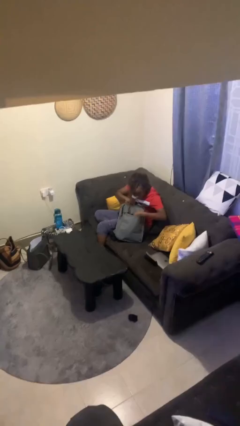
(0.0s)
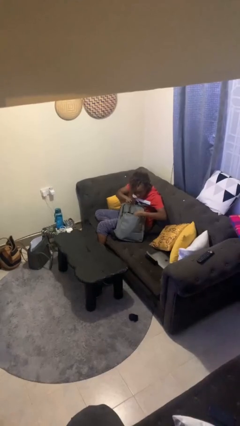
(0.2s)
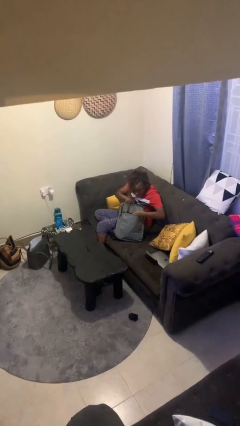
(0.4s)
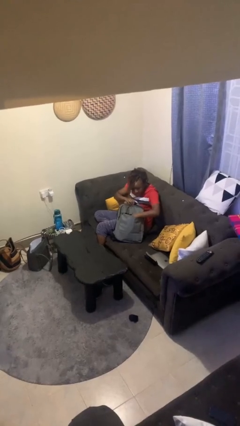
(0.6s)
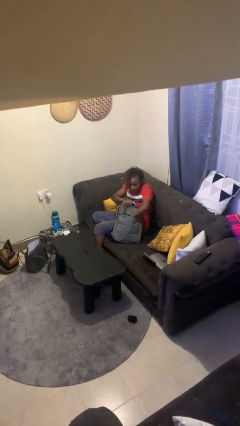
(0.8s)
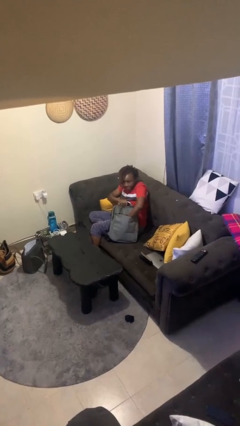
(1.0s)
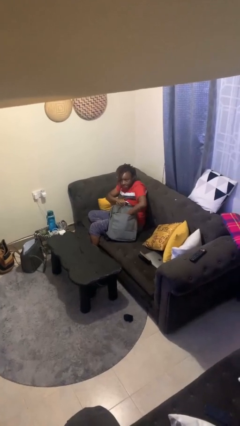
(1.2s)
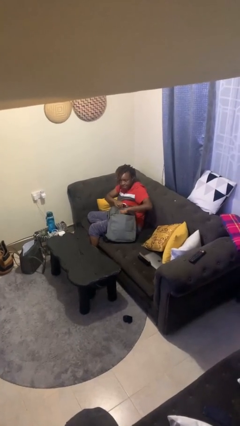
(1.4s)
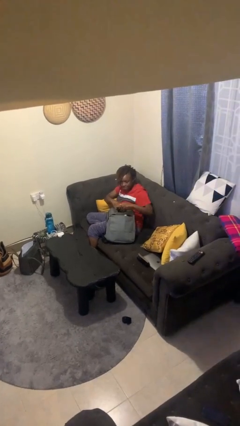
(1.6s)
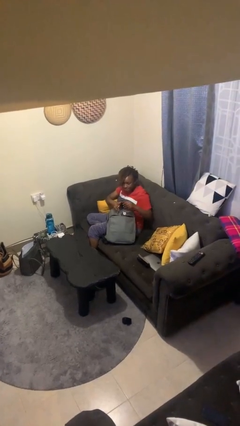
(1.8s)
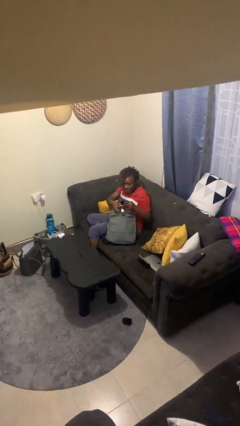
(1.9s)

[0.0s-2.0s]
person takes object from backpack

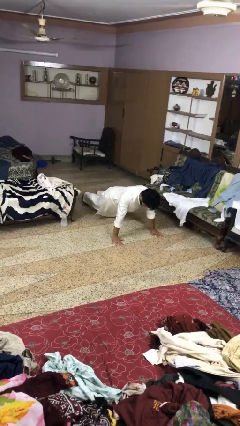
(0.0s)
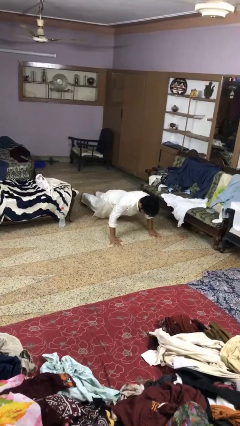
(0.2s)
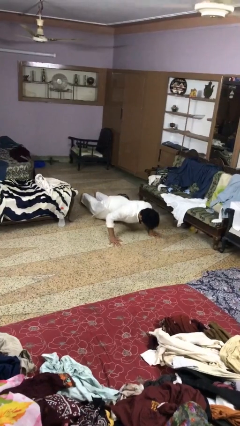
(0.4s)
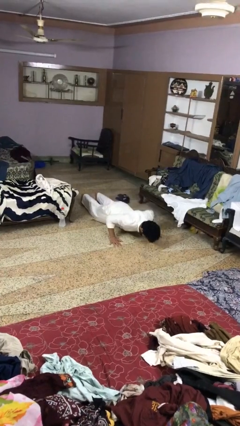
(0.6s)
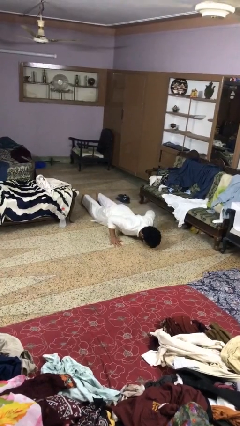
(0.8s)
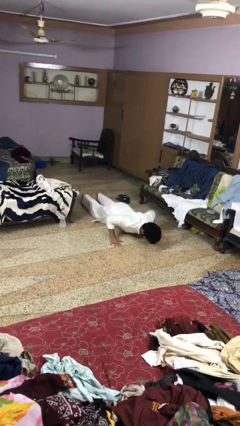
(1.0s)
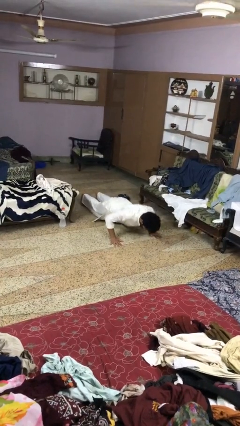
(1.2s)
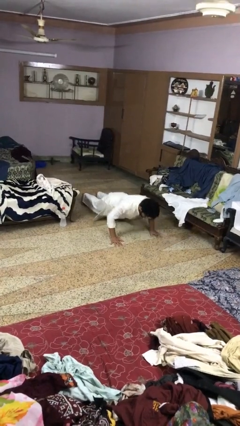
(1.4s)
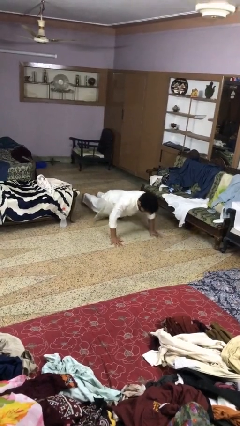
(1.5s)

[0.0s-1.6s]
person exercises with pushup

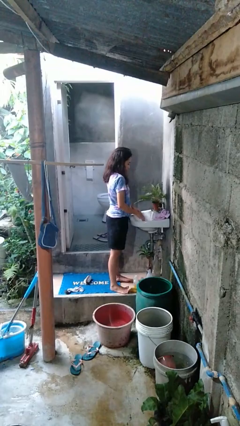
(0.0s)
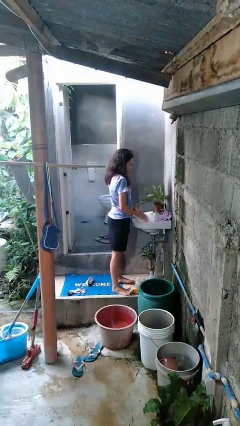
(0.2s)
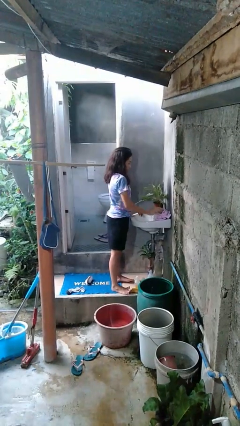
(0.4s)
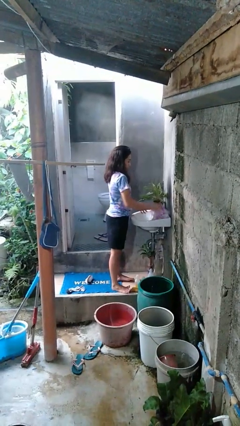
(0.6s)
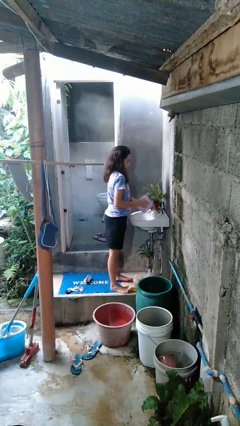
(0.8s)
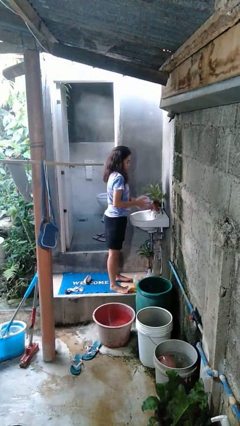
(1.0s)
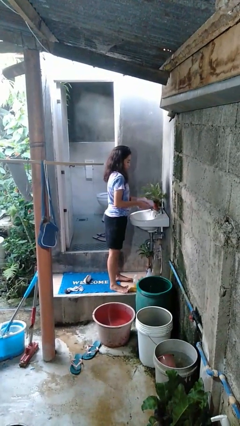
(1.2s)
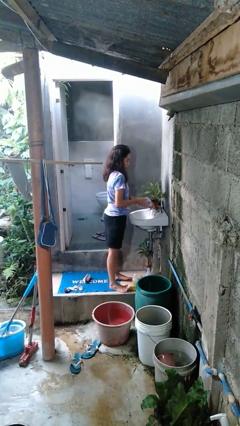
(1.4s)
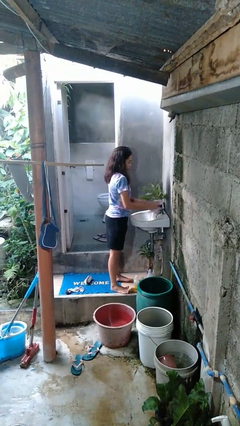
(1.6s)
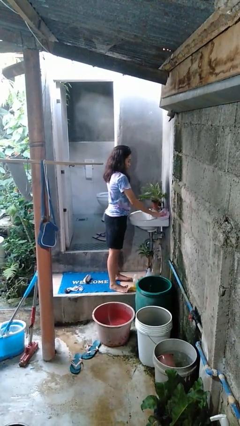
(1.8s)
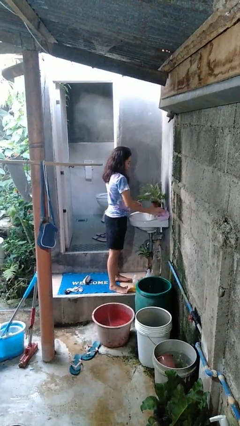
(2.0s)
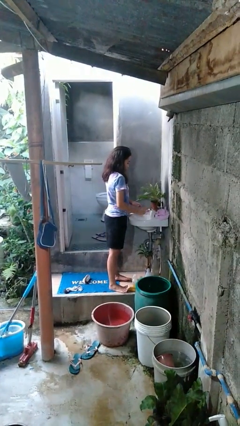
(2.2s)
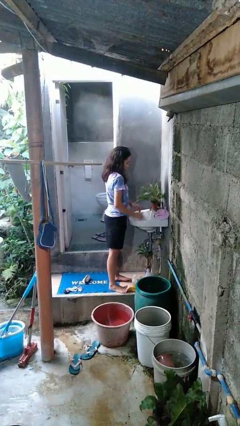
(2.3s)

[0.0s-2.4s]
person dries hands with towel

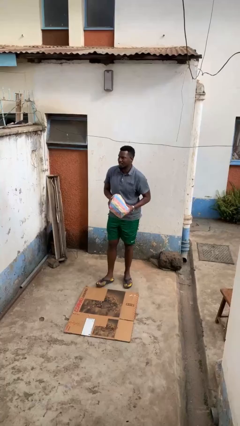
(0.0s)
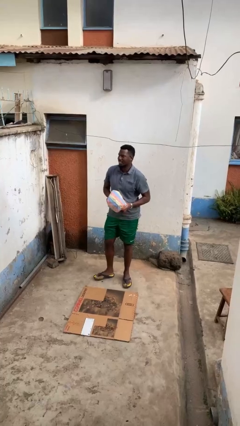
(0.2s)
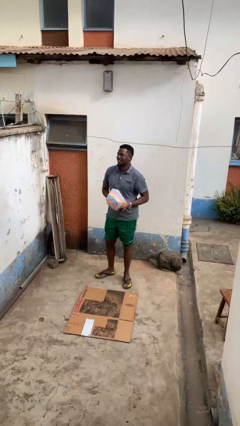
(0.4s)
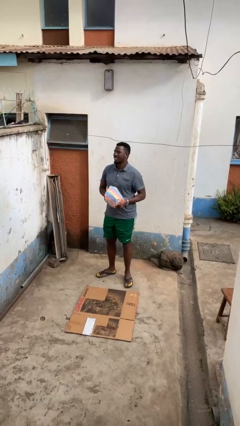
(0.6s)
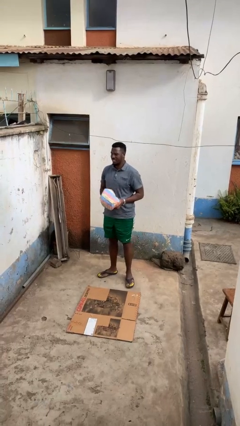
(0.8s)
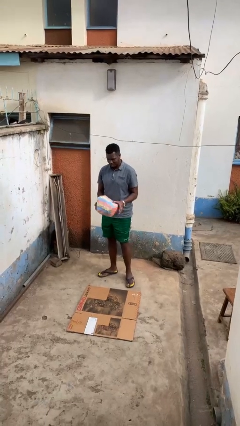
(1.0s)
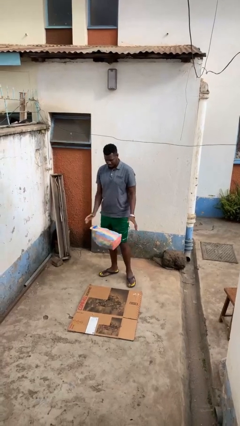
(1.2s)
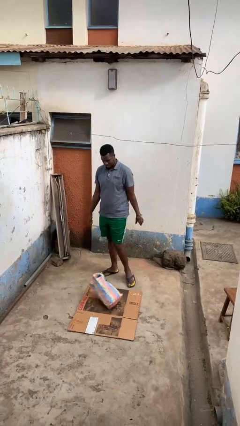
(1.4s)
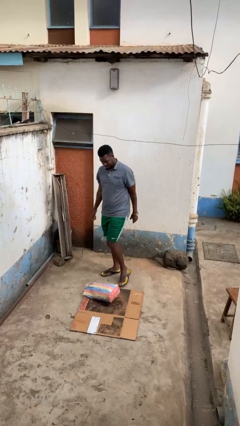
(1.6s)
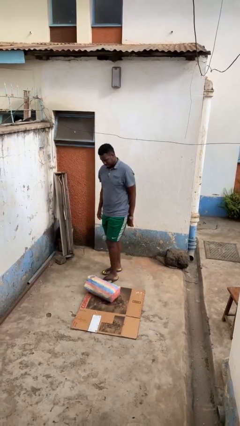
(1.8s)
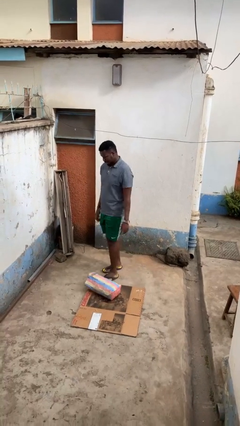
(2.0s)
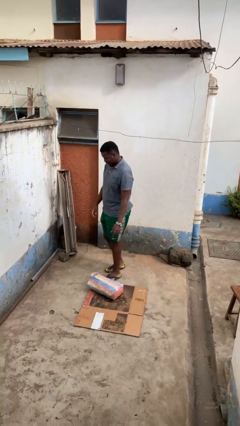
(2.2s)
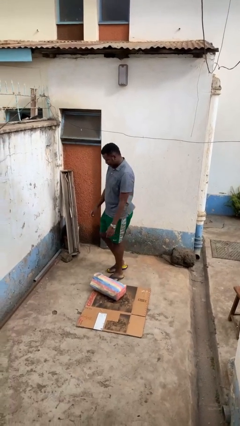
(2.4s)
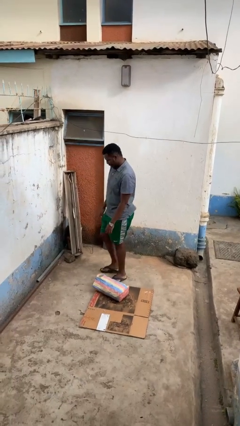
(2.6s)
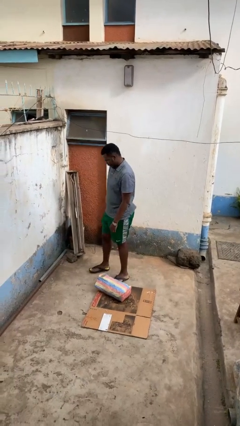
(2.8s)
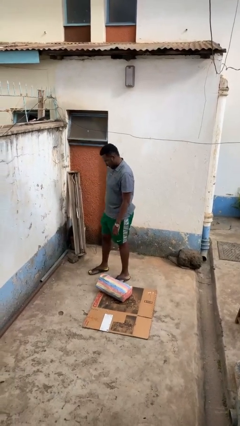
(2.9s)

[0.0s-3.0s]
person drops object

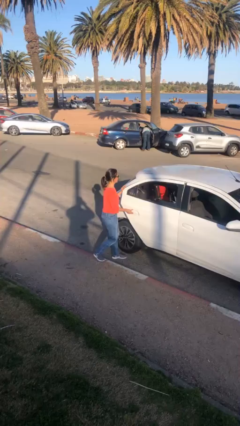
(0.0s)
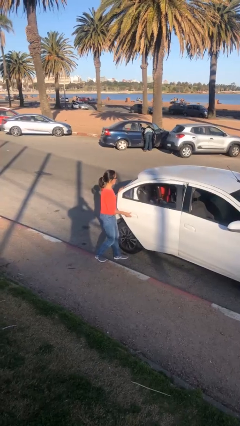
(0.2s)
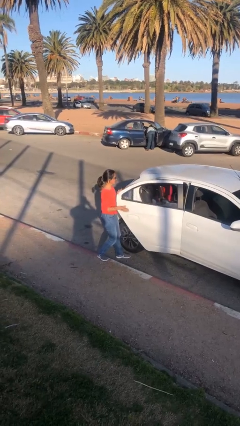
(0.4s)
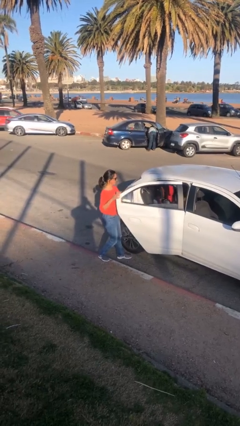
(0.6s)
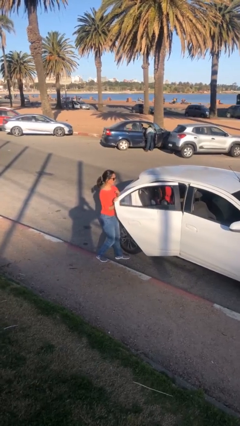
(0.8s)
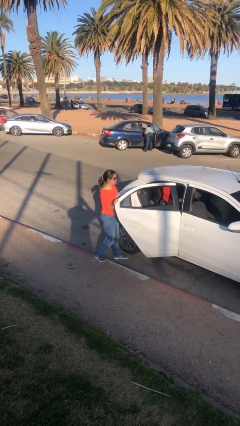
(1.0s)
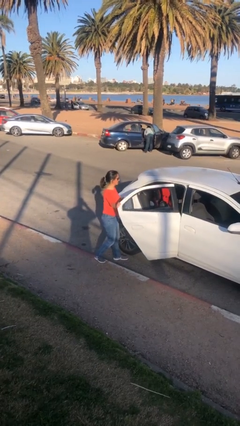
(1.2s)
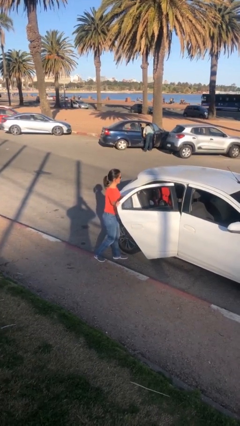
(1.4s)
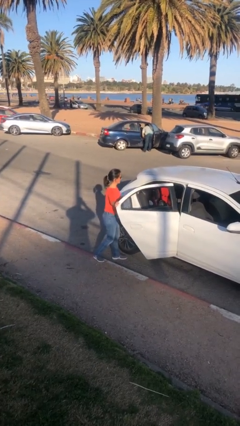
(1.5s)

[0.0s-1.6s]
person opens car door

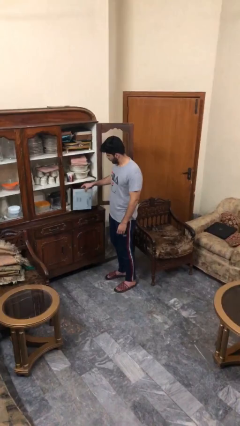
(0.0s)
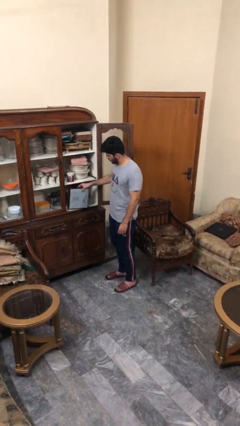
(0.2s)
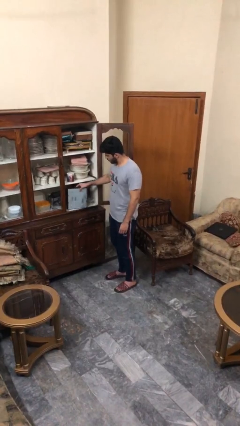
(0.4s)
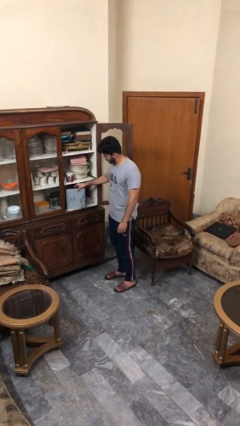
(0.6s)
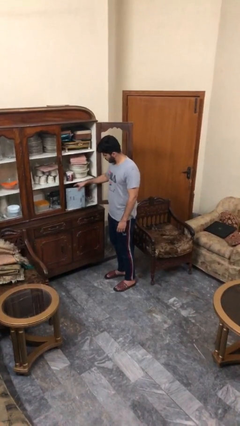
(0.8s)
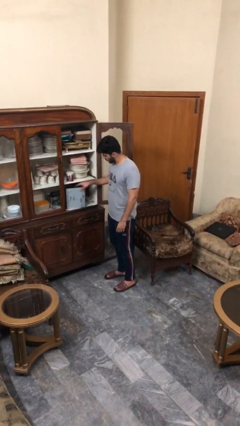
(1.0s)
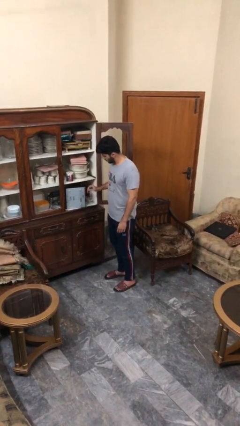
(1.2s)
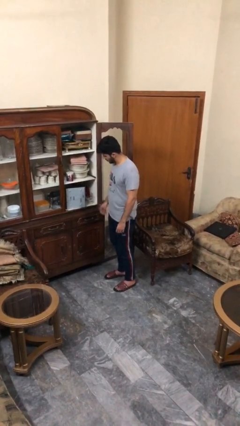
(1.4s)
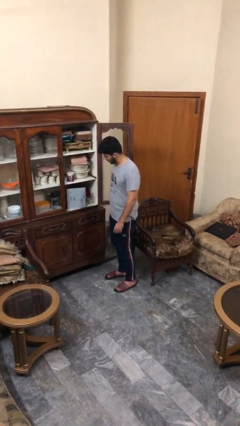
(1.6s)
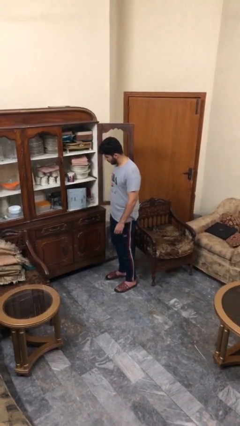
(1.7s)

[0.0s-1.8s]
person puts down object into cabinet

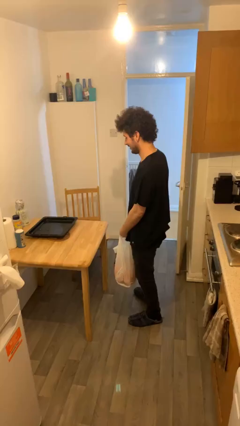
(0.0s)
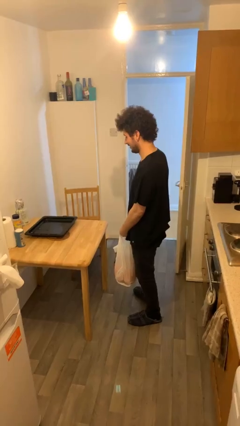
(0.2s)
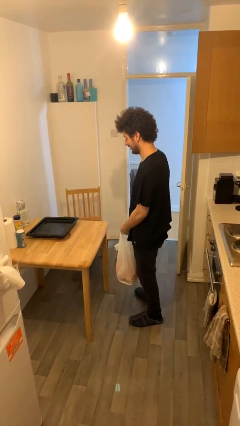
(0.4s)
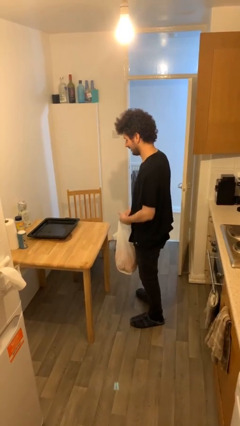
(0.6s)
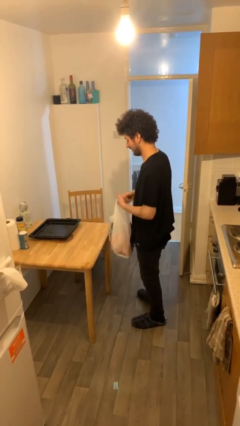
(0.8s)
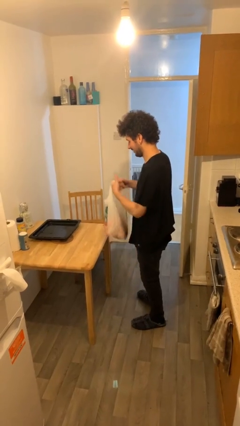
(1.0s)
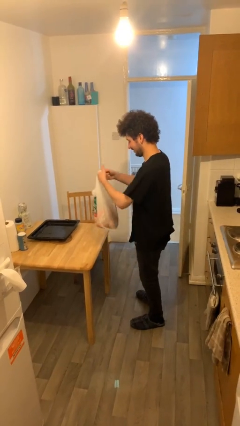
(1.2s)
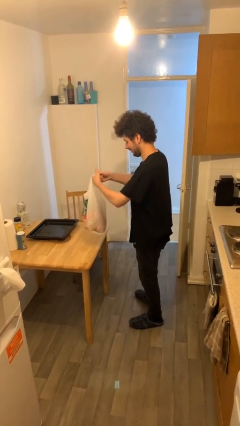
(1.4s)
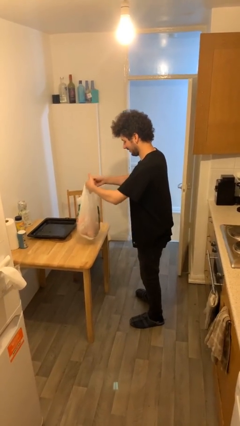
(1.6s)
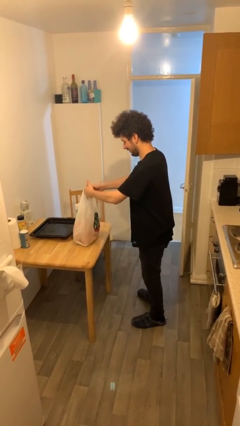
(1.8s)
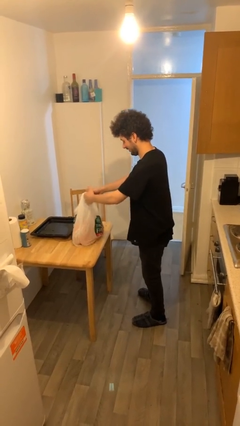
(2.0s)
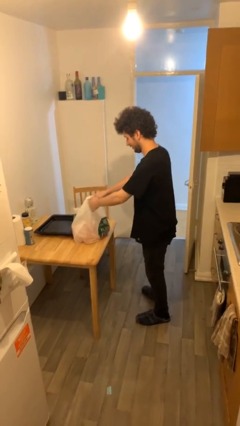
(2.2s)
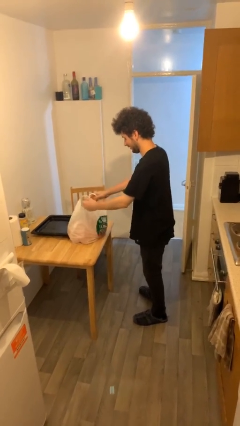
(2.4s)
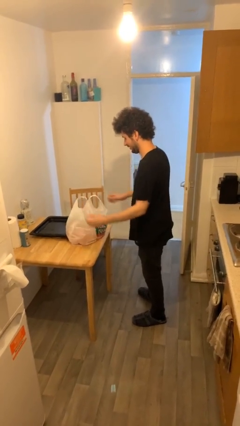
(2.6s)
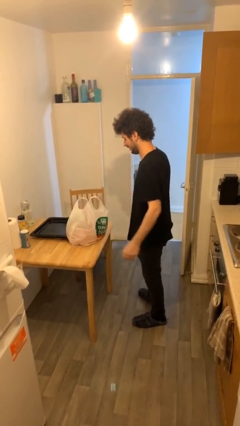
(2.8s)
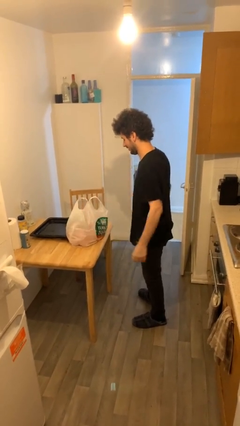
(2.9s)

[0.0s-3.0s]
person puts down object on table

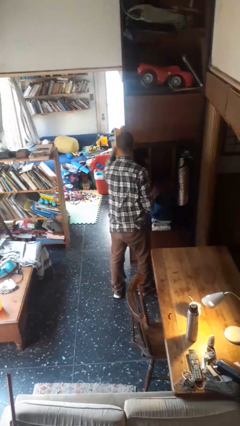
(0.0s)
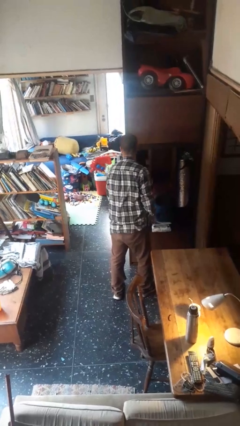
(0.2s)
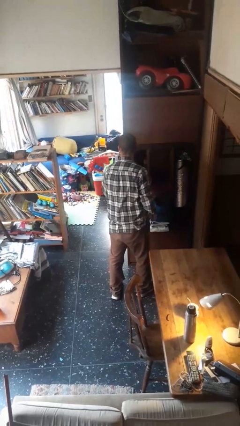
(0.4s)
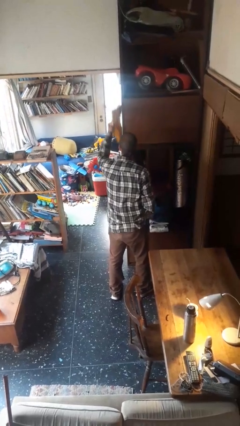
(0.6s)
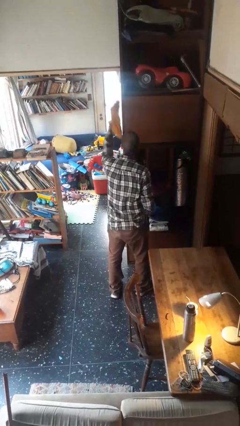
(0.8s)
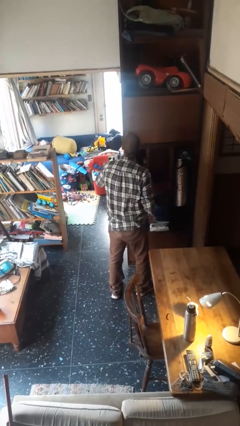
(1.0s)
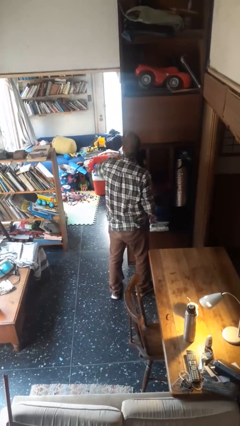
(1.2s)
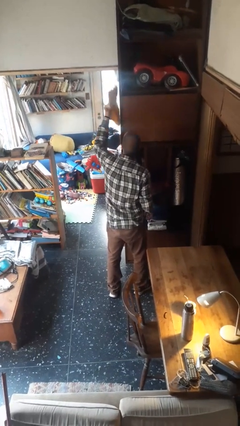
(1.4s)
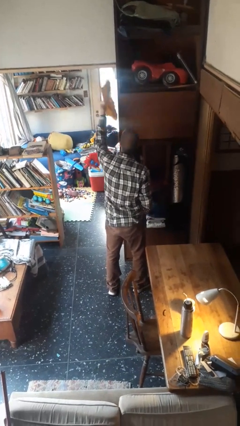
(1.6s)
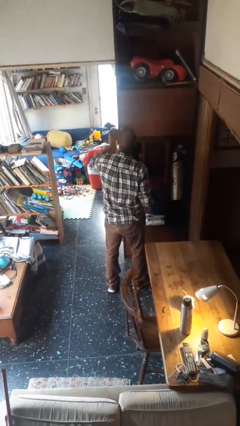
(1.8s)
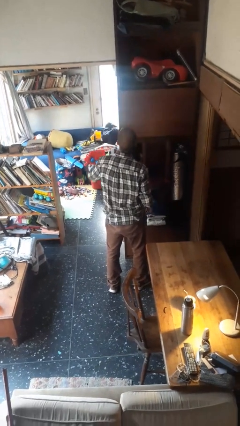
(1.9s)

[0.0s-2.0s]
person dusts furniture
